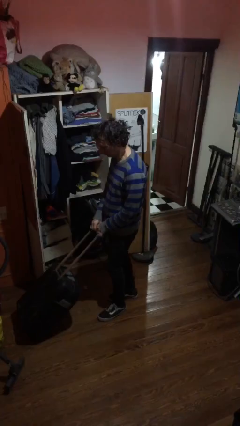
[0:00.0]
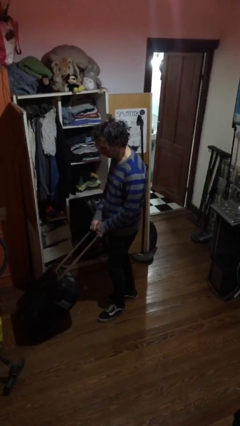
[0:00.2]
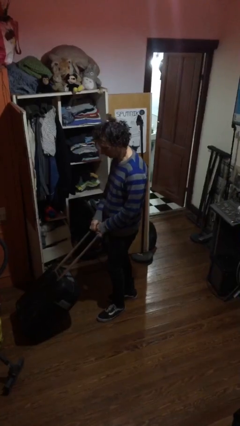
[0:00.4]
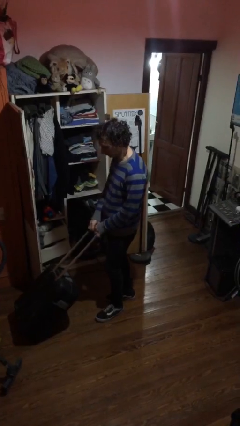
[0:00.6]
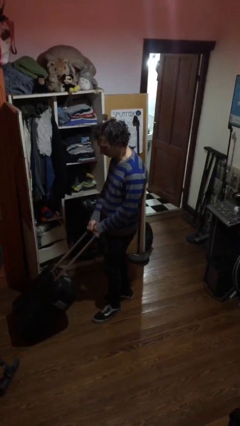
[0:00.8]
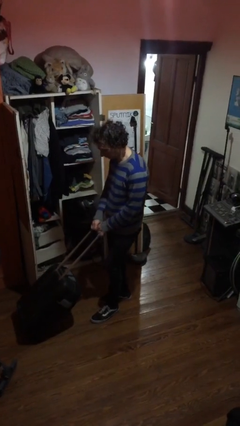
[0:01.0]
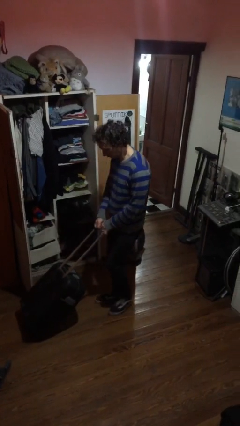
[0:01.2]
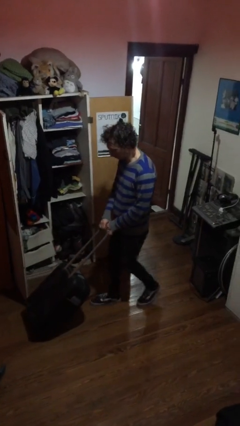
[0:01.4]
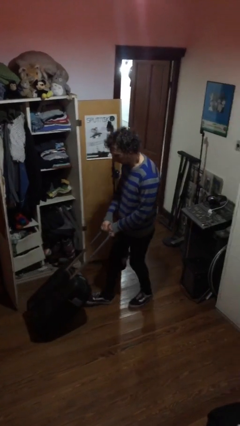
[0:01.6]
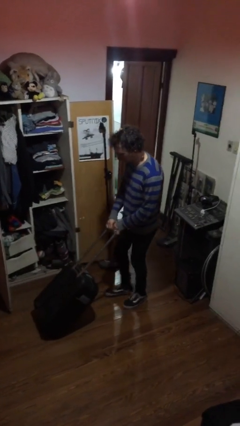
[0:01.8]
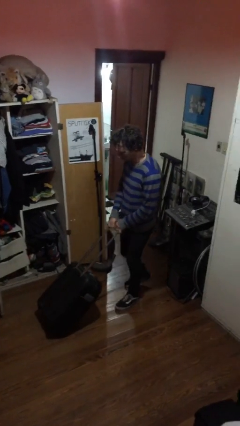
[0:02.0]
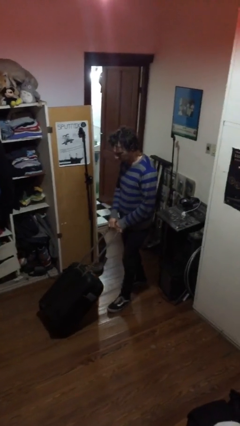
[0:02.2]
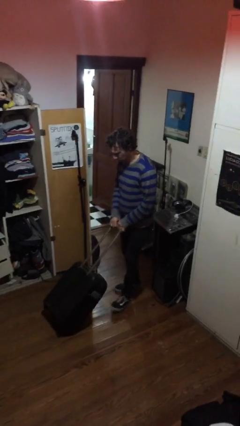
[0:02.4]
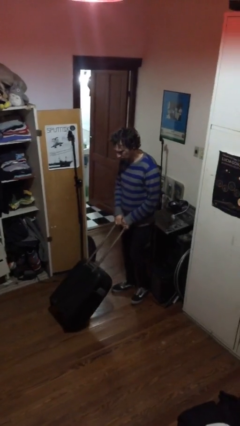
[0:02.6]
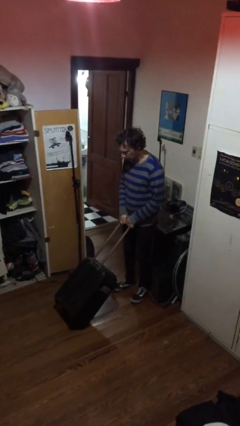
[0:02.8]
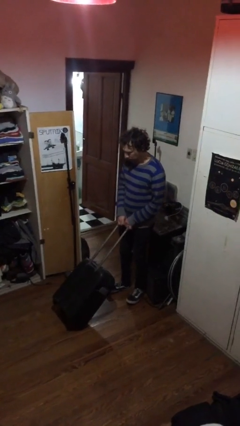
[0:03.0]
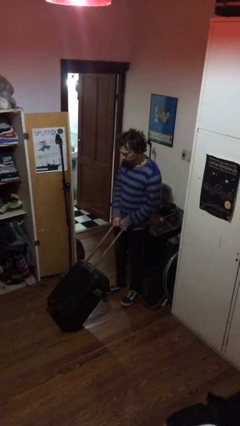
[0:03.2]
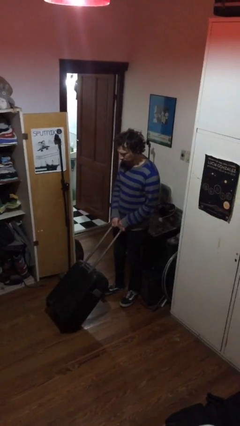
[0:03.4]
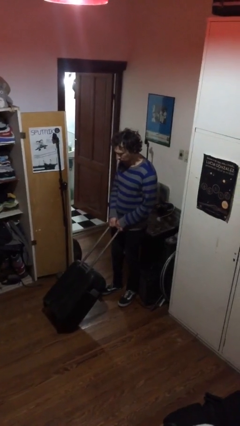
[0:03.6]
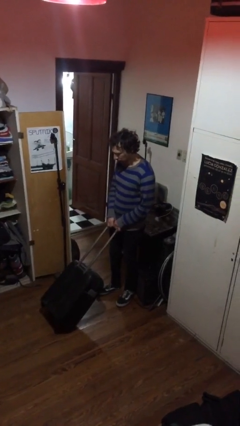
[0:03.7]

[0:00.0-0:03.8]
person pulls wheeled cart

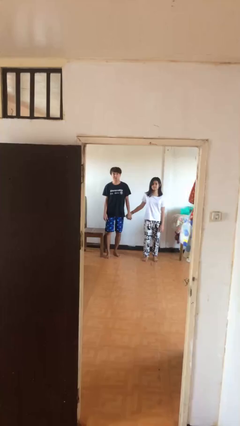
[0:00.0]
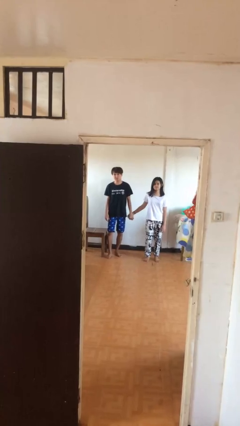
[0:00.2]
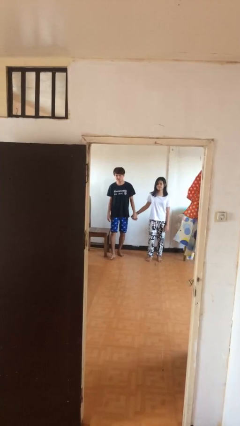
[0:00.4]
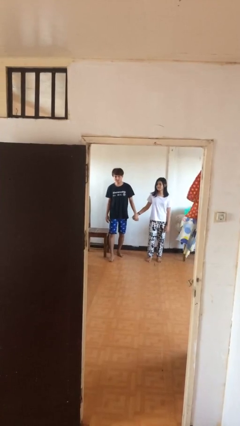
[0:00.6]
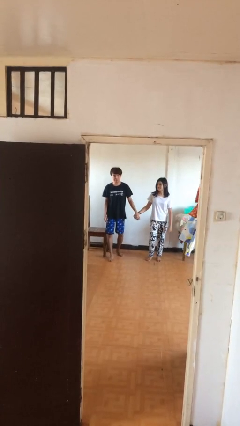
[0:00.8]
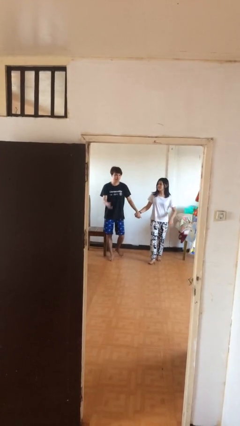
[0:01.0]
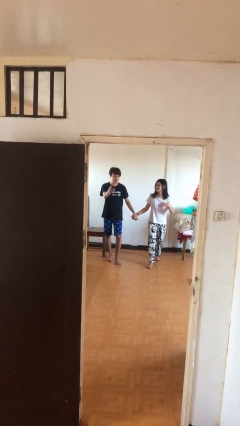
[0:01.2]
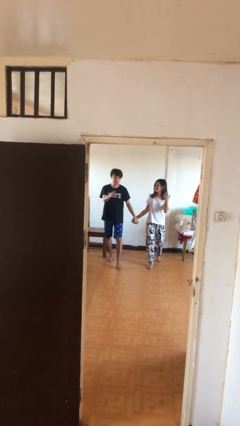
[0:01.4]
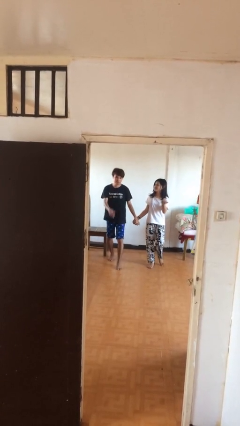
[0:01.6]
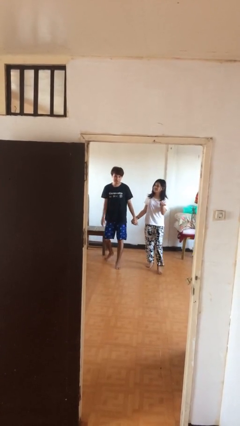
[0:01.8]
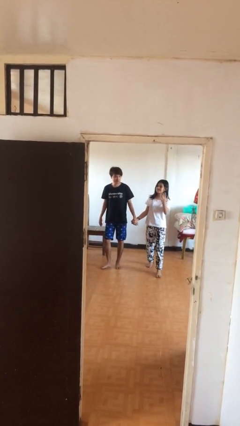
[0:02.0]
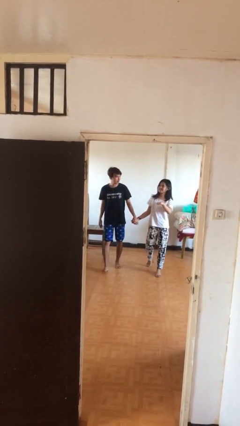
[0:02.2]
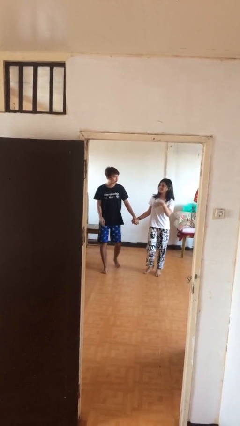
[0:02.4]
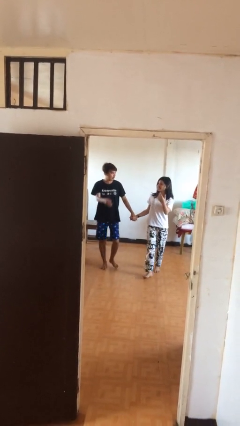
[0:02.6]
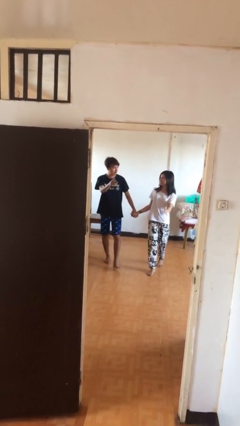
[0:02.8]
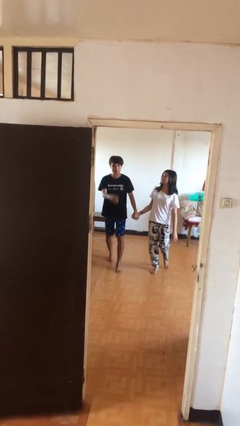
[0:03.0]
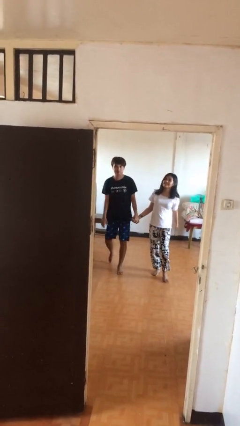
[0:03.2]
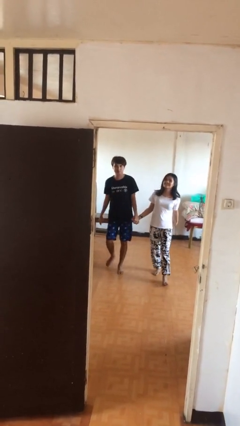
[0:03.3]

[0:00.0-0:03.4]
person holds hand

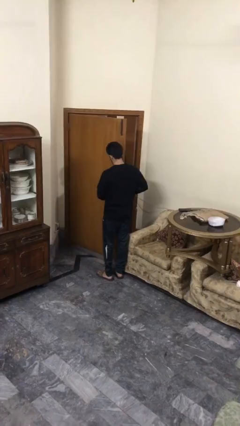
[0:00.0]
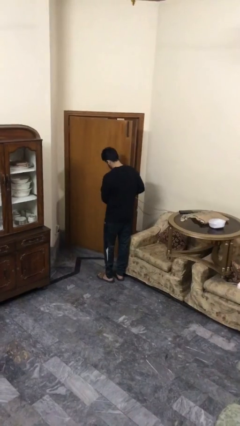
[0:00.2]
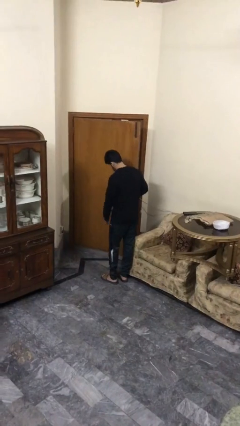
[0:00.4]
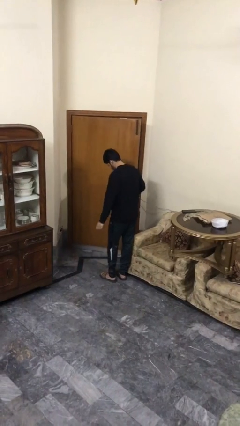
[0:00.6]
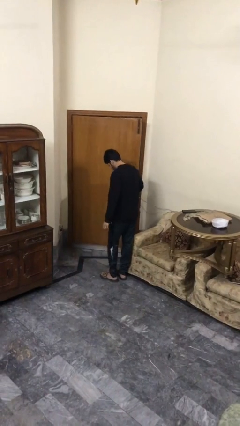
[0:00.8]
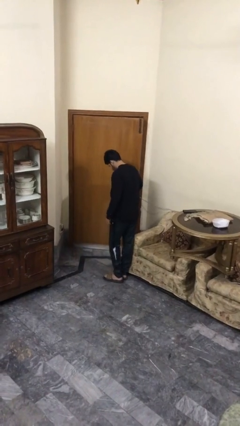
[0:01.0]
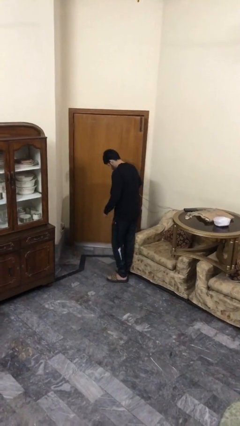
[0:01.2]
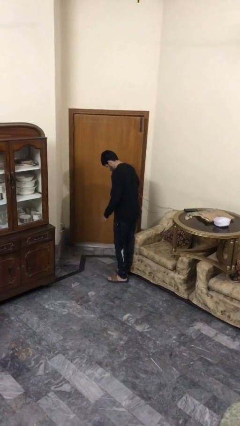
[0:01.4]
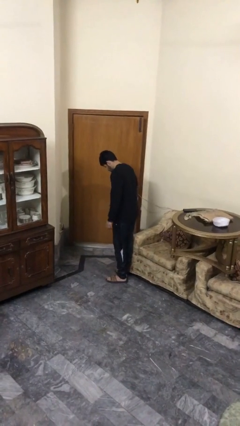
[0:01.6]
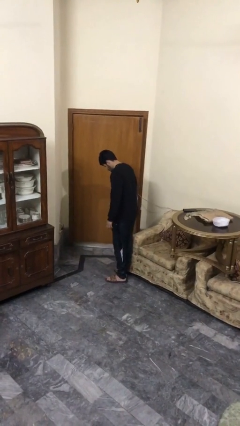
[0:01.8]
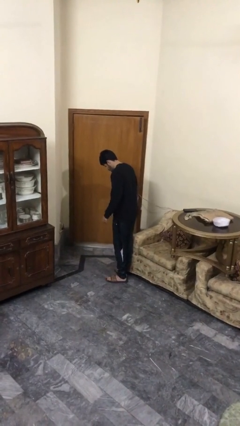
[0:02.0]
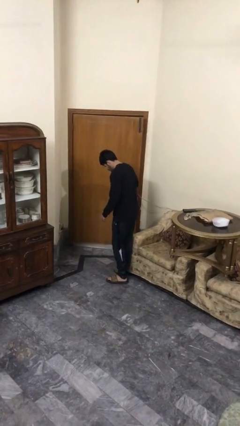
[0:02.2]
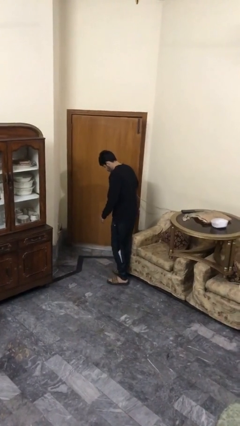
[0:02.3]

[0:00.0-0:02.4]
person closes facility door

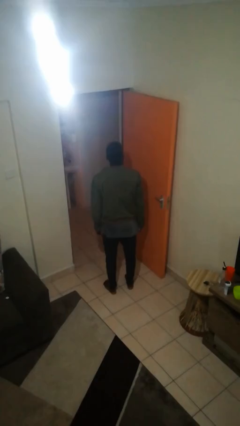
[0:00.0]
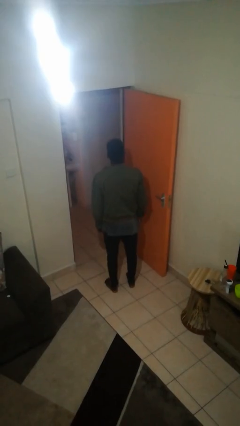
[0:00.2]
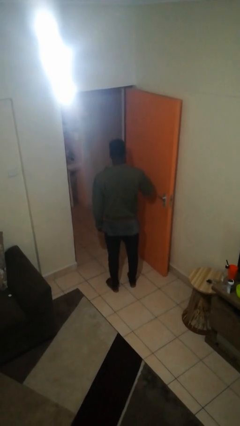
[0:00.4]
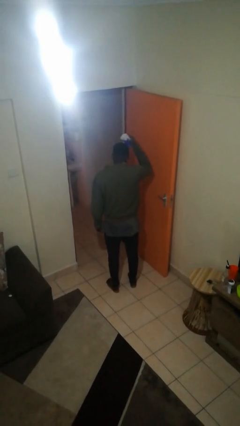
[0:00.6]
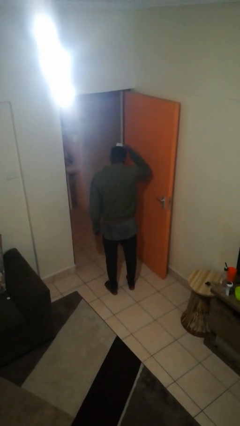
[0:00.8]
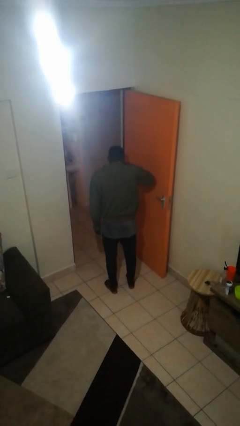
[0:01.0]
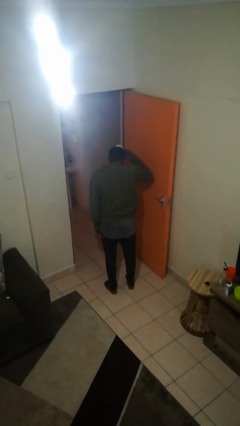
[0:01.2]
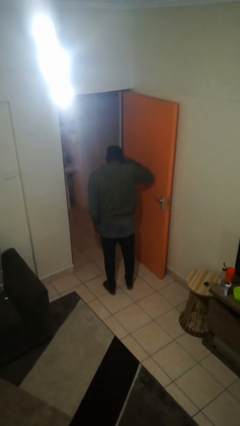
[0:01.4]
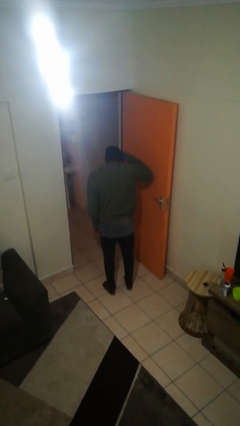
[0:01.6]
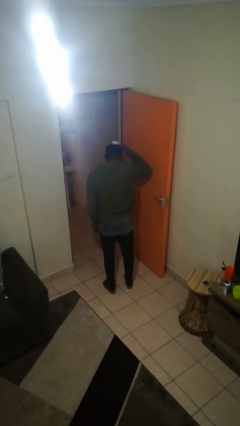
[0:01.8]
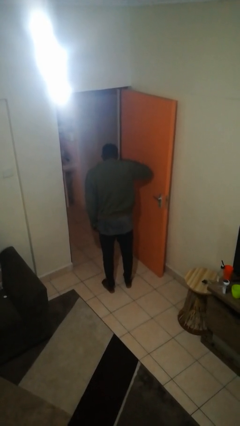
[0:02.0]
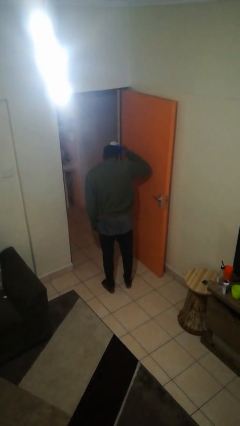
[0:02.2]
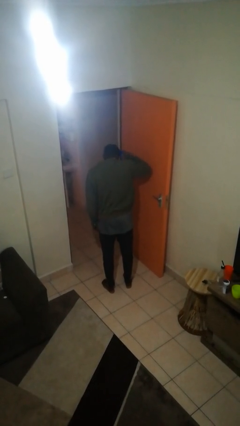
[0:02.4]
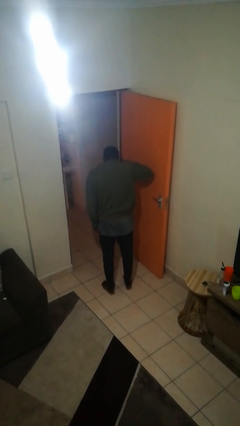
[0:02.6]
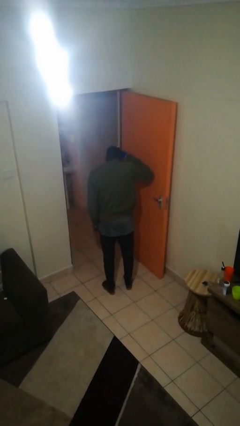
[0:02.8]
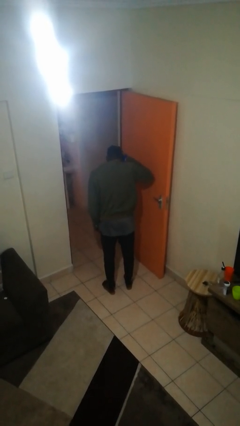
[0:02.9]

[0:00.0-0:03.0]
person brushes hair

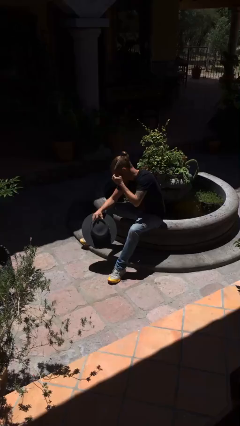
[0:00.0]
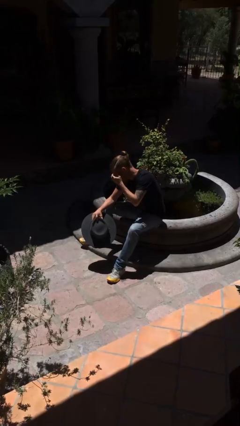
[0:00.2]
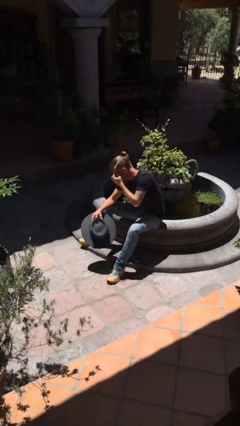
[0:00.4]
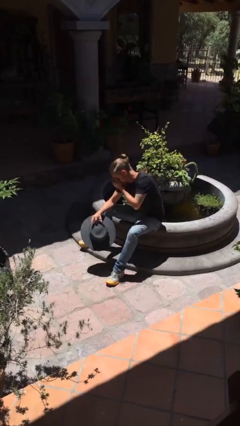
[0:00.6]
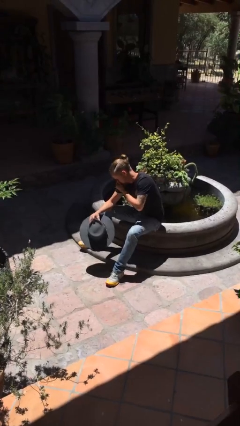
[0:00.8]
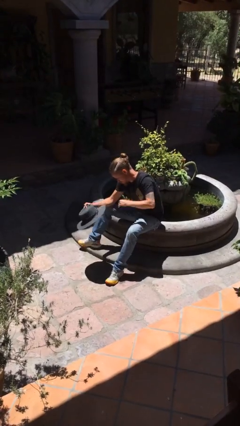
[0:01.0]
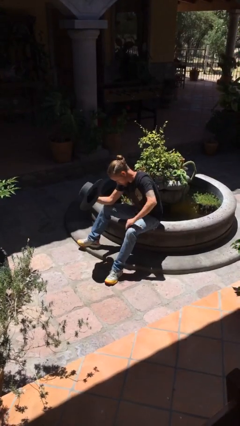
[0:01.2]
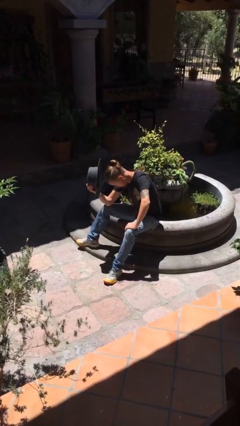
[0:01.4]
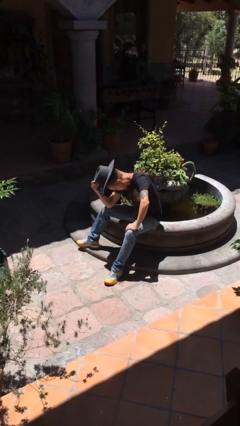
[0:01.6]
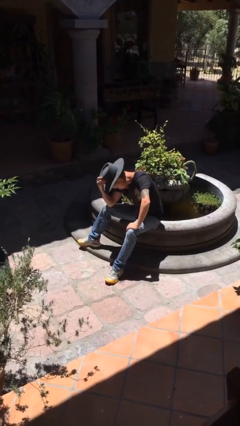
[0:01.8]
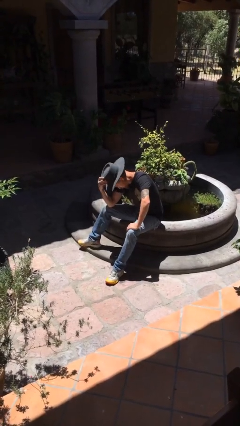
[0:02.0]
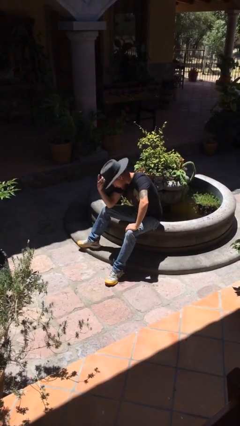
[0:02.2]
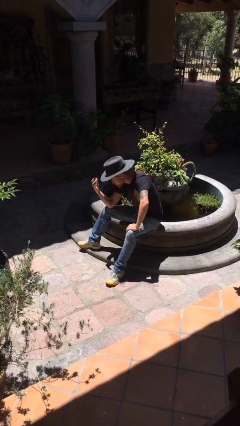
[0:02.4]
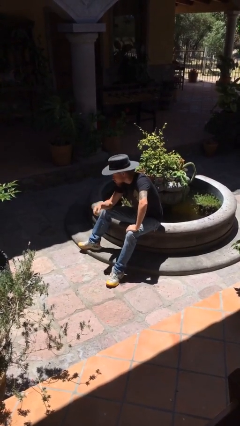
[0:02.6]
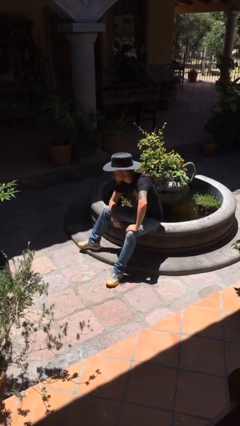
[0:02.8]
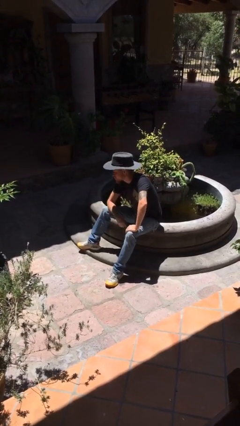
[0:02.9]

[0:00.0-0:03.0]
person puts on hat

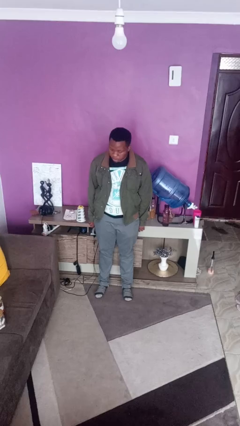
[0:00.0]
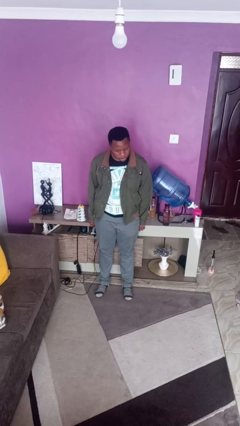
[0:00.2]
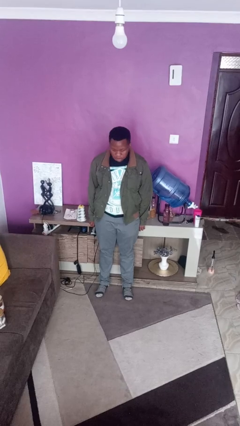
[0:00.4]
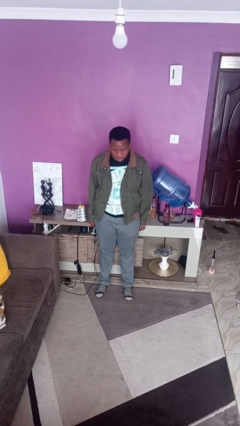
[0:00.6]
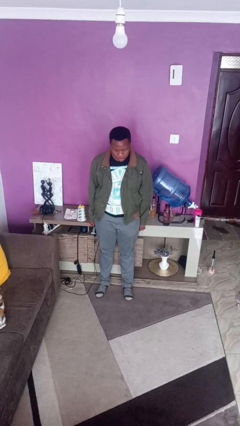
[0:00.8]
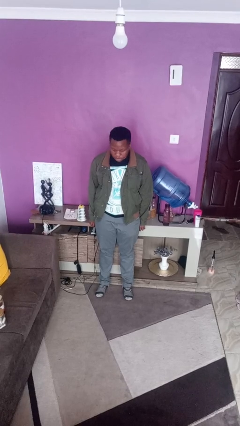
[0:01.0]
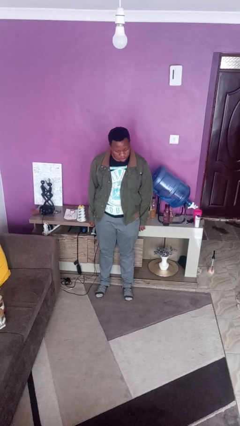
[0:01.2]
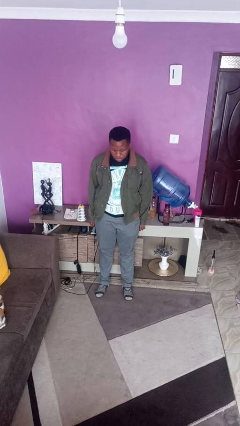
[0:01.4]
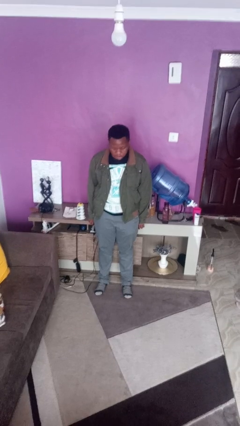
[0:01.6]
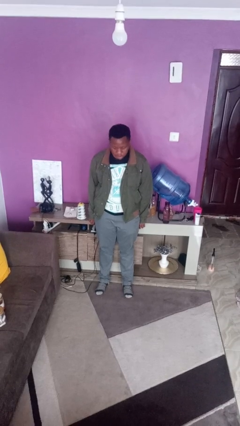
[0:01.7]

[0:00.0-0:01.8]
person shakes head

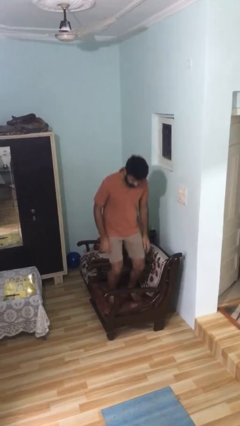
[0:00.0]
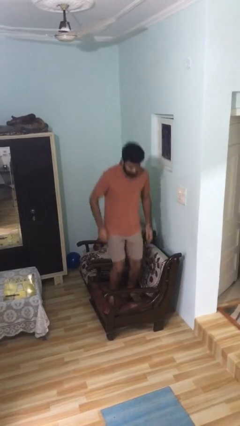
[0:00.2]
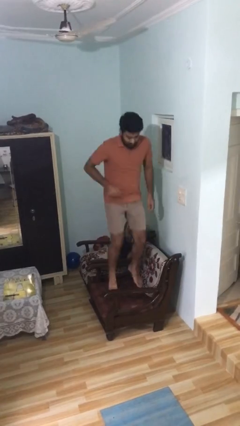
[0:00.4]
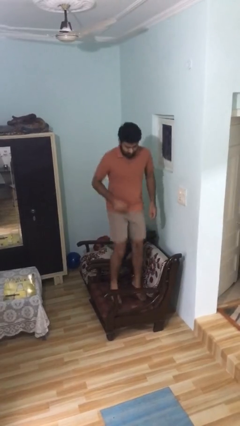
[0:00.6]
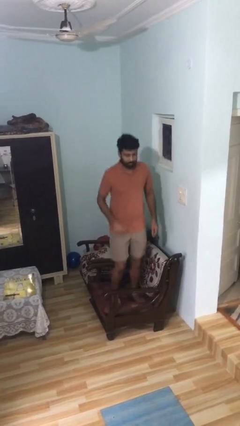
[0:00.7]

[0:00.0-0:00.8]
person jumps on couch
